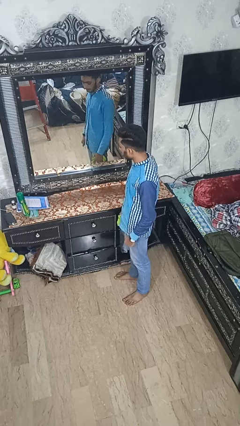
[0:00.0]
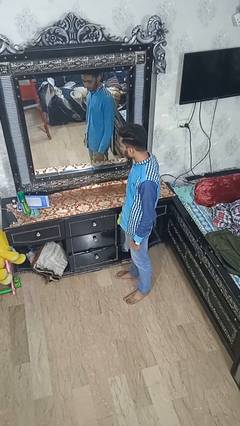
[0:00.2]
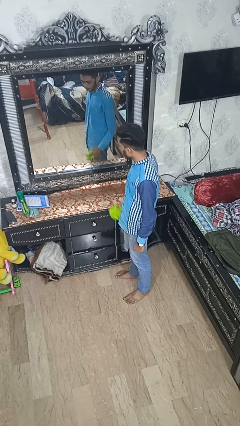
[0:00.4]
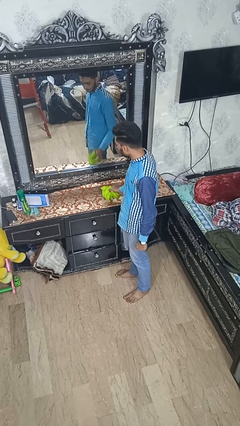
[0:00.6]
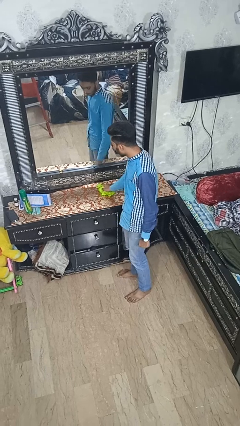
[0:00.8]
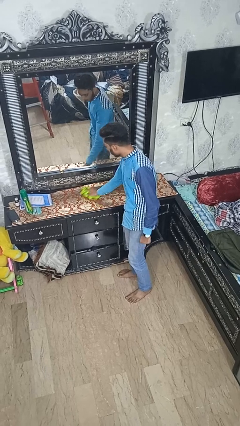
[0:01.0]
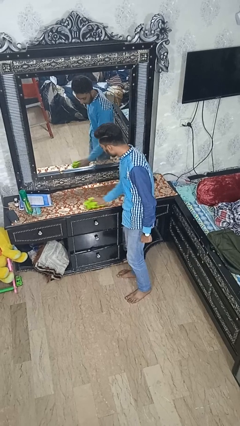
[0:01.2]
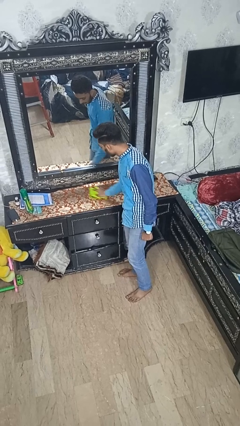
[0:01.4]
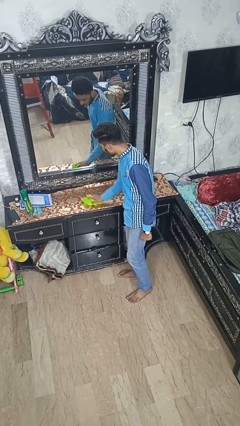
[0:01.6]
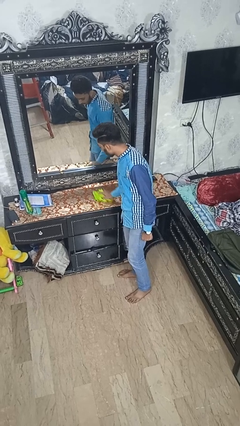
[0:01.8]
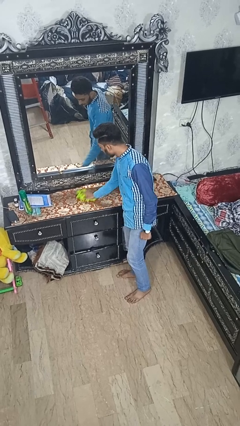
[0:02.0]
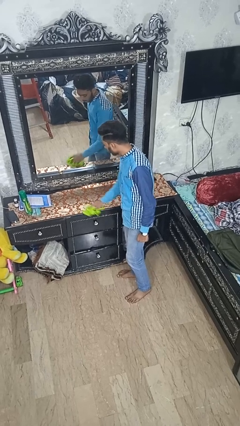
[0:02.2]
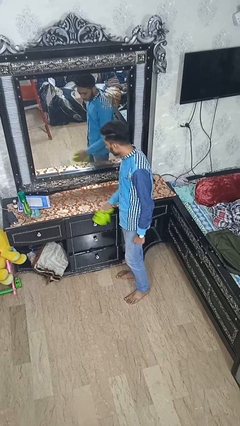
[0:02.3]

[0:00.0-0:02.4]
person cleans table with rag

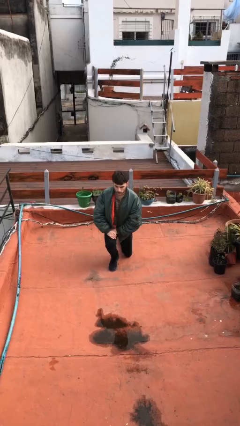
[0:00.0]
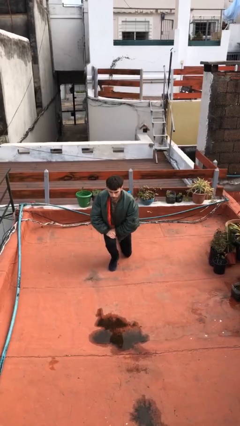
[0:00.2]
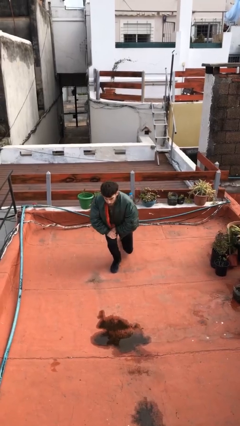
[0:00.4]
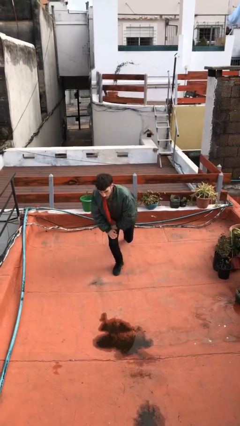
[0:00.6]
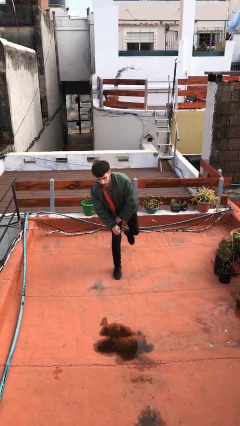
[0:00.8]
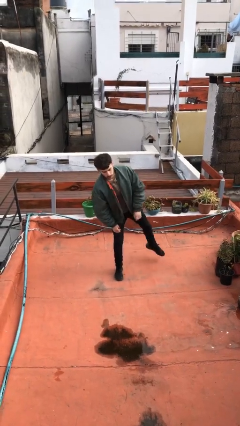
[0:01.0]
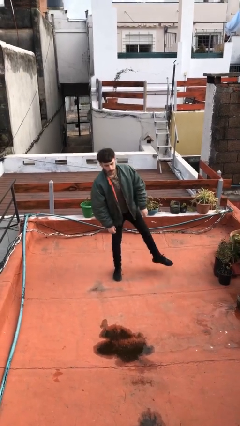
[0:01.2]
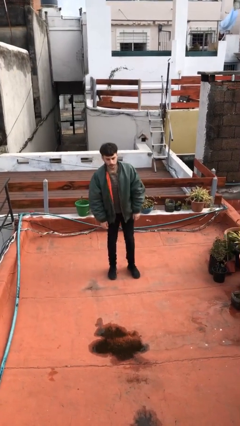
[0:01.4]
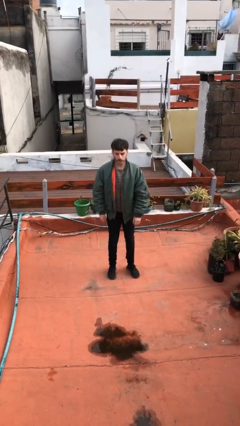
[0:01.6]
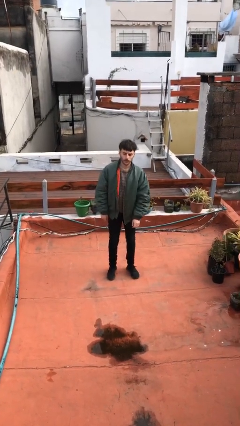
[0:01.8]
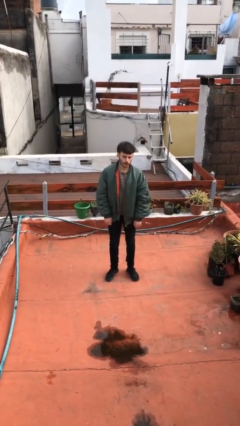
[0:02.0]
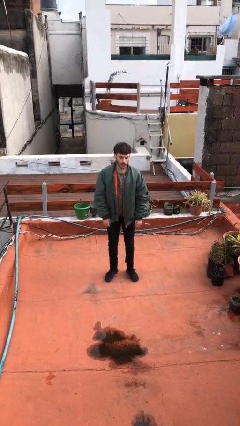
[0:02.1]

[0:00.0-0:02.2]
person stands up from floor

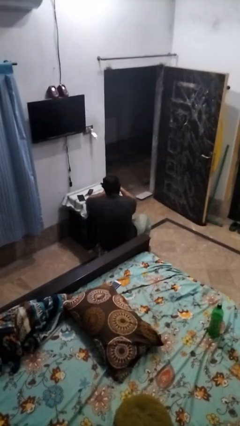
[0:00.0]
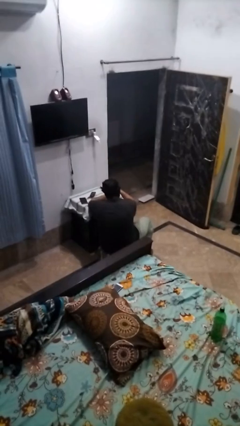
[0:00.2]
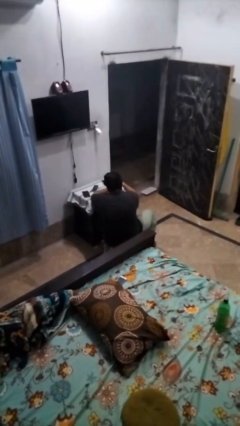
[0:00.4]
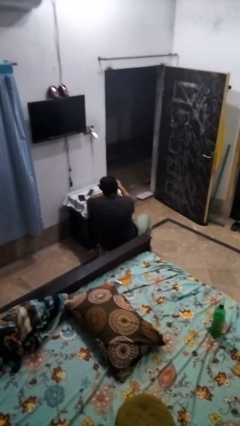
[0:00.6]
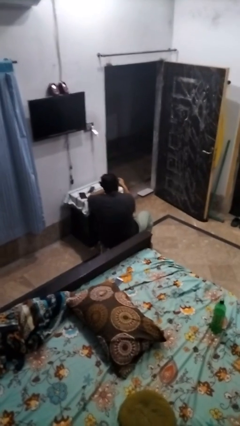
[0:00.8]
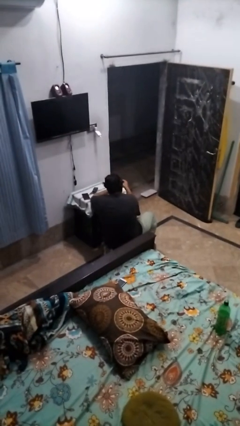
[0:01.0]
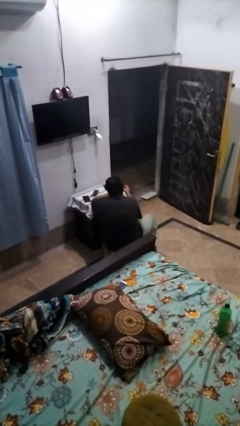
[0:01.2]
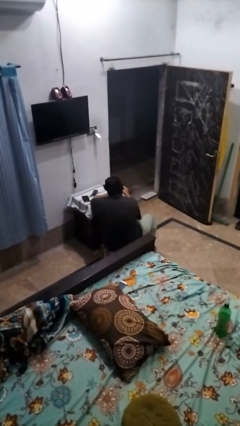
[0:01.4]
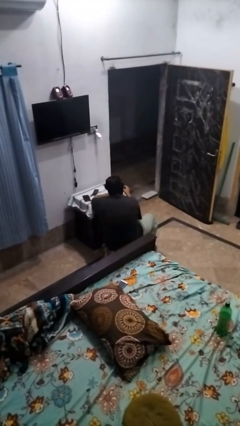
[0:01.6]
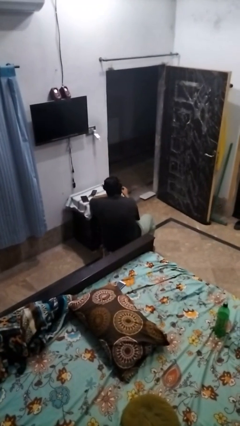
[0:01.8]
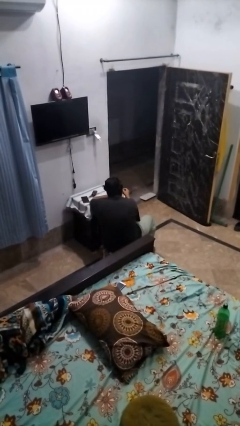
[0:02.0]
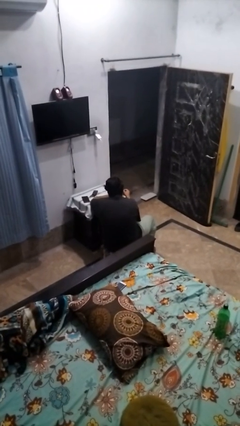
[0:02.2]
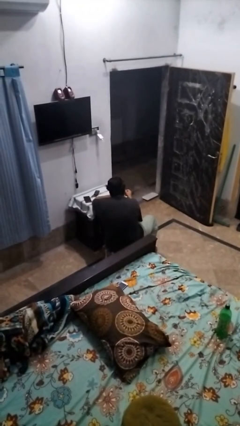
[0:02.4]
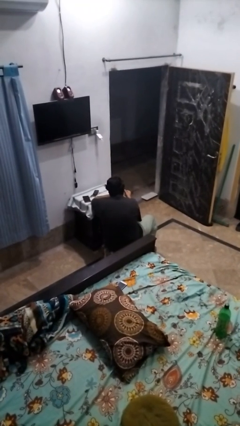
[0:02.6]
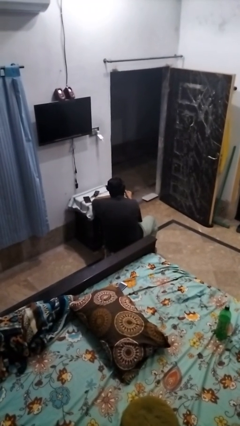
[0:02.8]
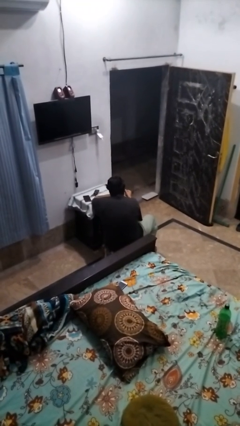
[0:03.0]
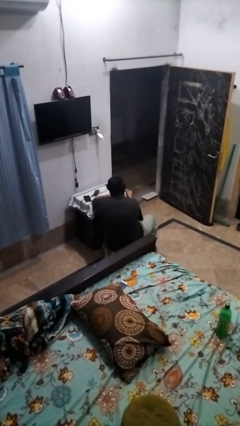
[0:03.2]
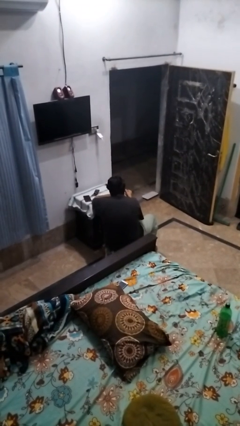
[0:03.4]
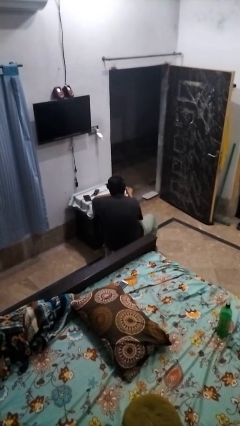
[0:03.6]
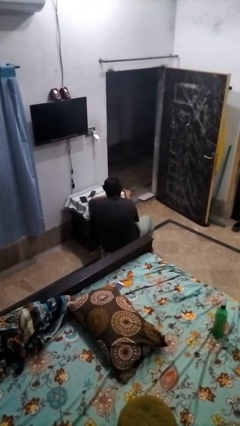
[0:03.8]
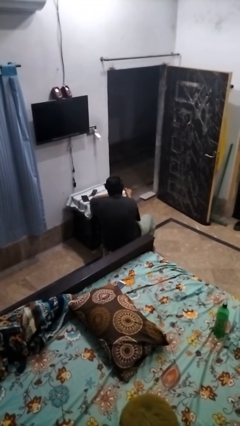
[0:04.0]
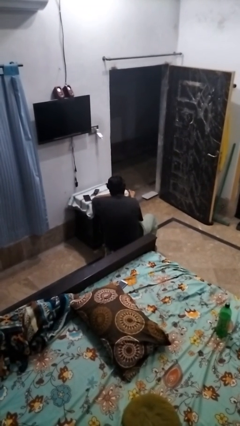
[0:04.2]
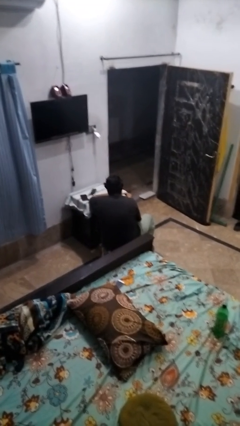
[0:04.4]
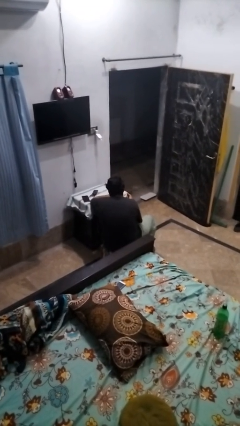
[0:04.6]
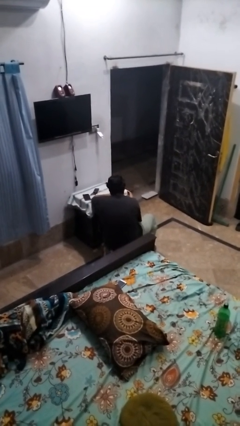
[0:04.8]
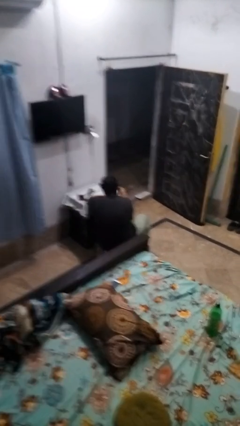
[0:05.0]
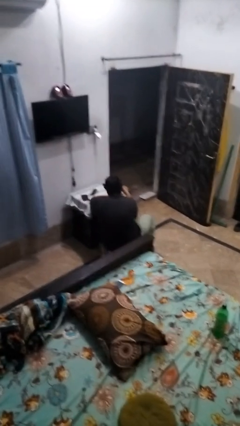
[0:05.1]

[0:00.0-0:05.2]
person paints fingernails

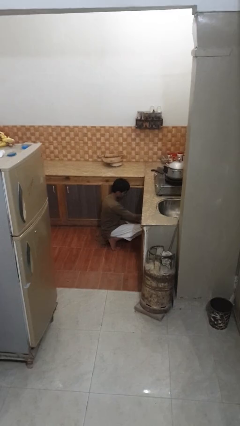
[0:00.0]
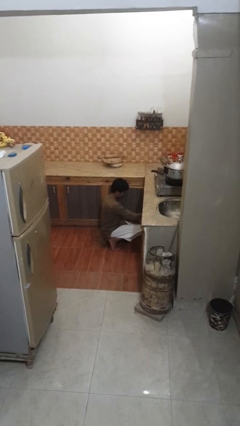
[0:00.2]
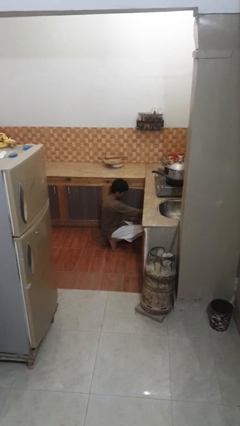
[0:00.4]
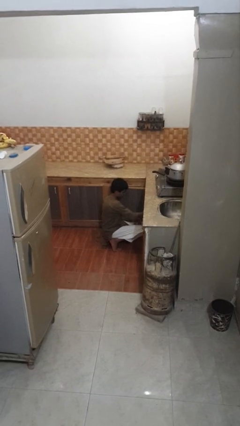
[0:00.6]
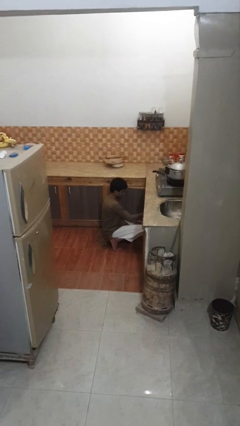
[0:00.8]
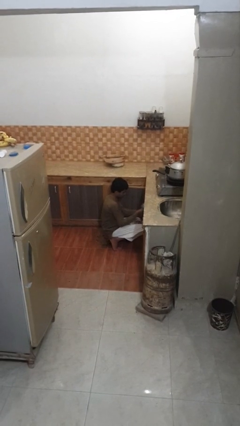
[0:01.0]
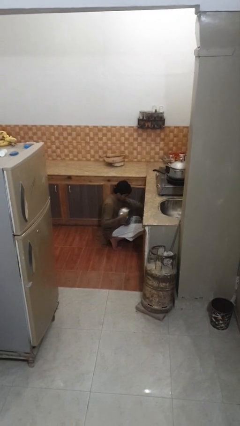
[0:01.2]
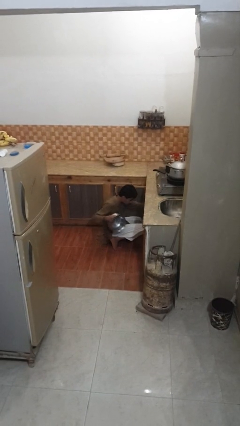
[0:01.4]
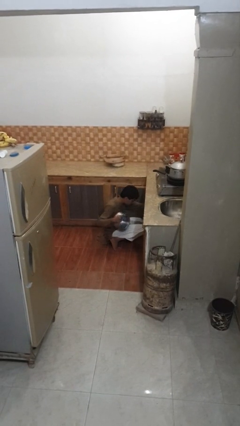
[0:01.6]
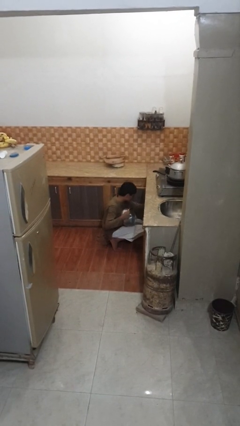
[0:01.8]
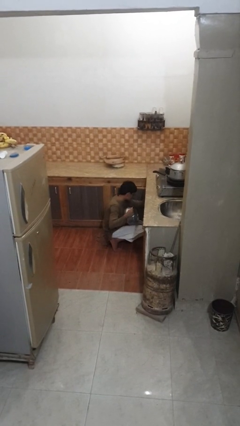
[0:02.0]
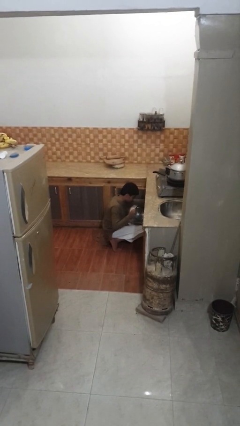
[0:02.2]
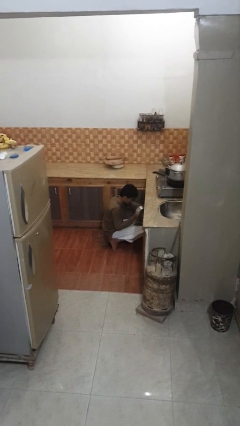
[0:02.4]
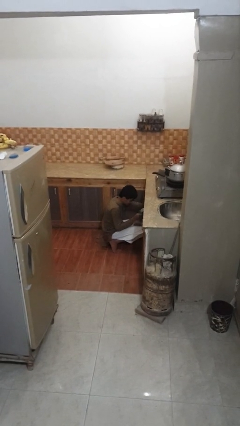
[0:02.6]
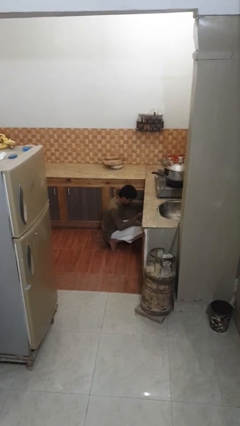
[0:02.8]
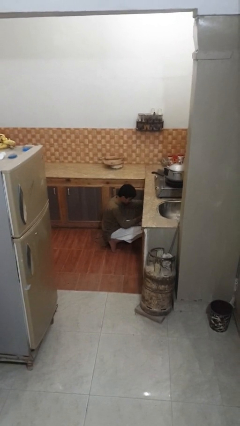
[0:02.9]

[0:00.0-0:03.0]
person searches in kitchen drawer

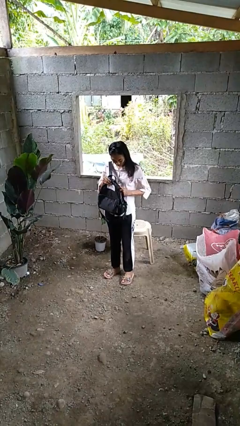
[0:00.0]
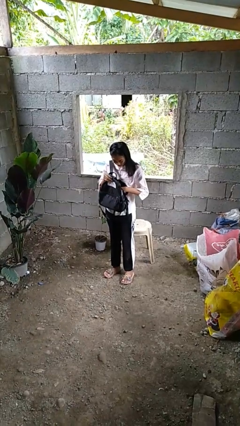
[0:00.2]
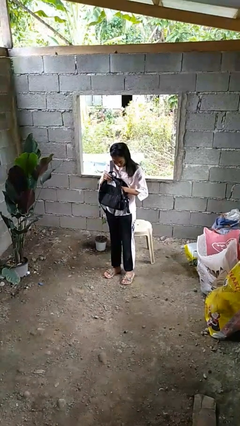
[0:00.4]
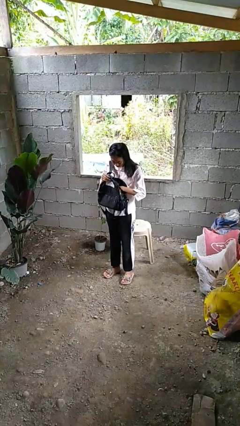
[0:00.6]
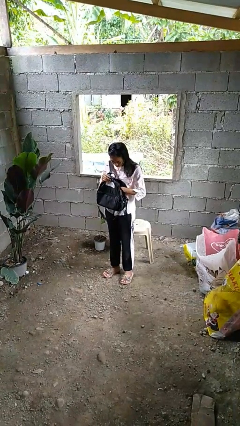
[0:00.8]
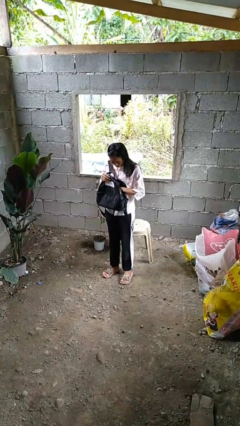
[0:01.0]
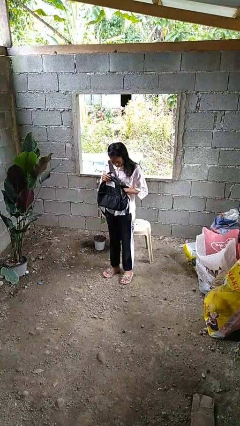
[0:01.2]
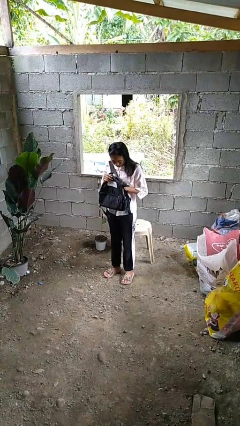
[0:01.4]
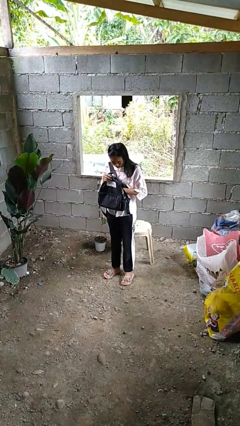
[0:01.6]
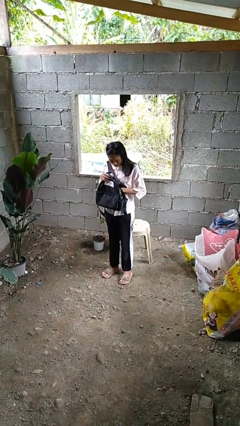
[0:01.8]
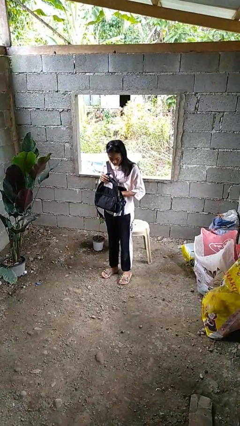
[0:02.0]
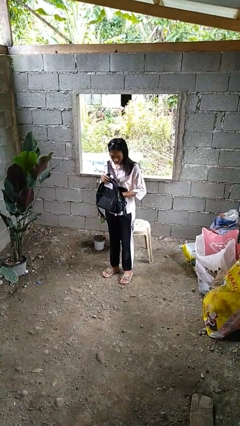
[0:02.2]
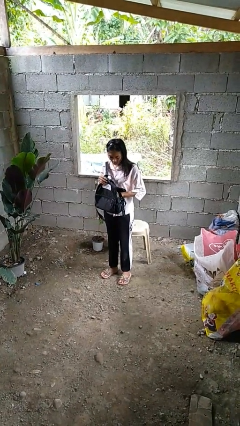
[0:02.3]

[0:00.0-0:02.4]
person searches in backpack

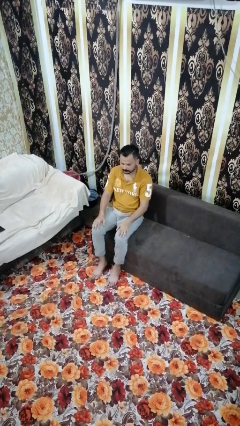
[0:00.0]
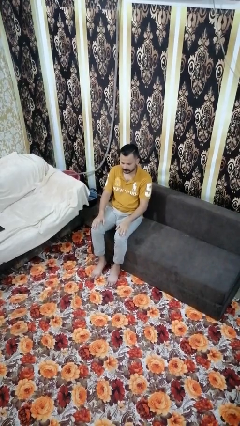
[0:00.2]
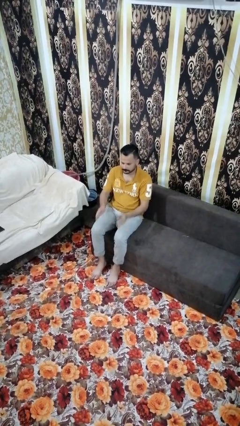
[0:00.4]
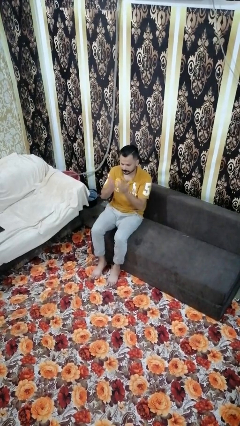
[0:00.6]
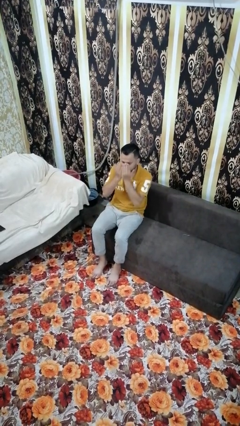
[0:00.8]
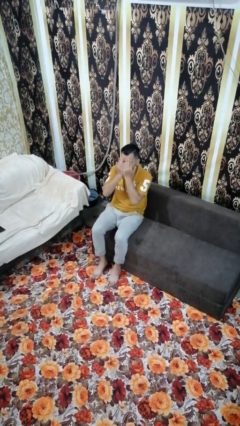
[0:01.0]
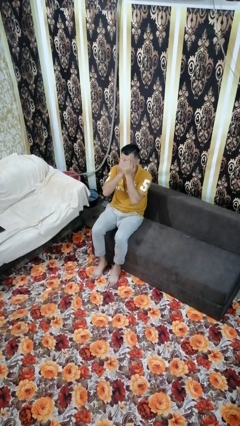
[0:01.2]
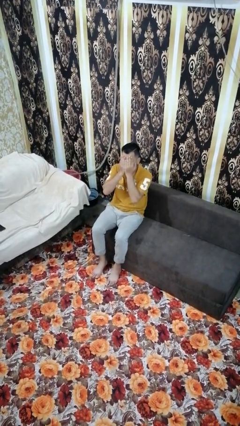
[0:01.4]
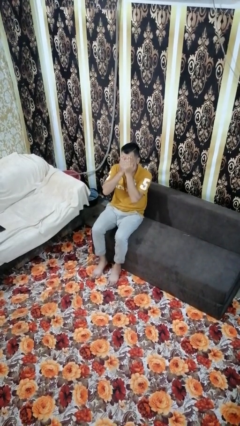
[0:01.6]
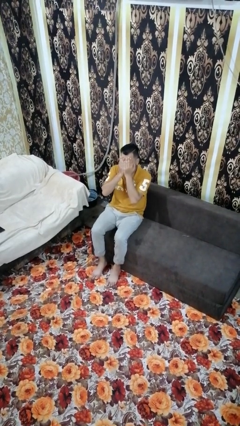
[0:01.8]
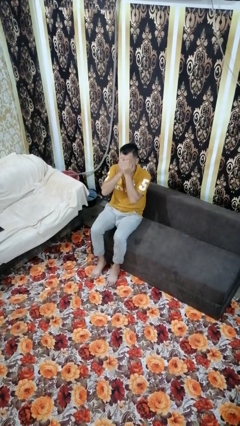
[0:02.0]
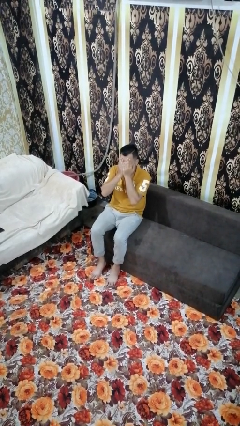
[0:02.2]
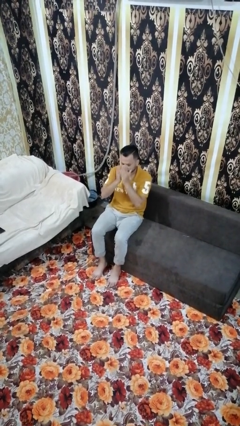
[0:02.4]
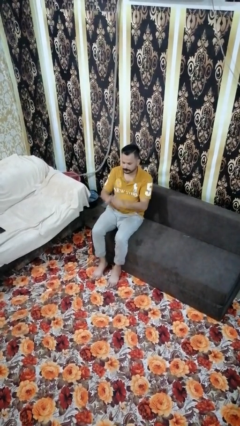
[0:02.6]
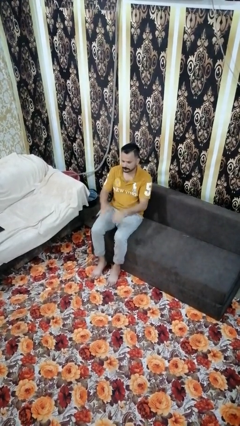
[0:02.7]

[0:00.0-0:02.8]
person covers face with hands
